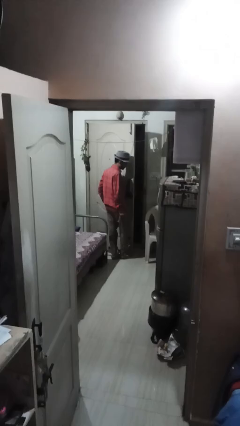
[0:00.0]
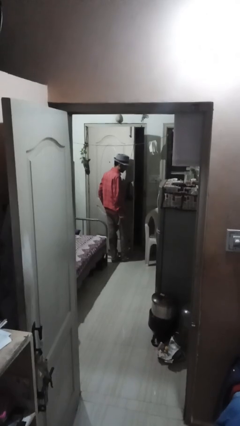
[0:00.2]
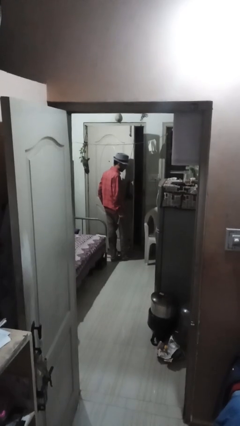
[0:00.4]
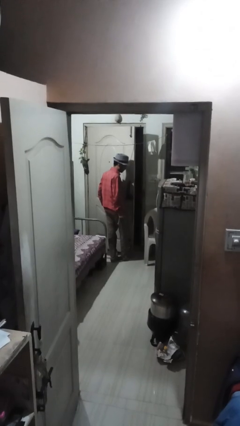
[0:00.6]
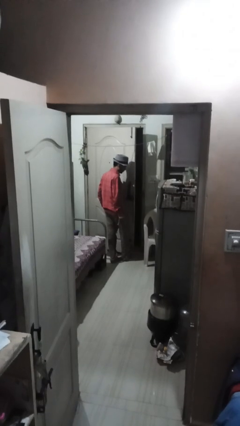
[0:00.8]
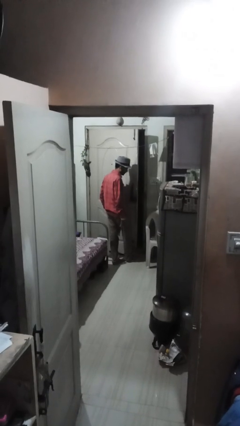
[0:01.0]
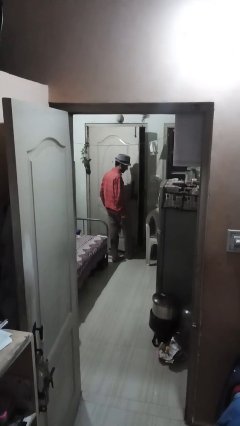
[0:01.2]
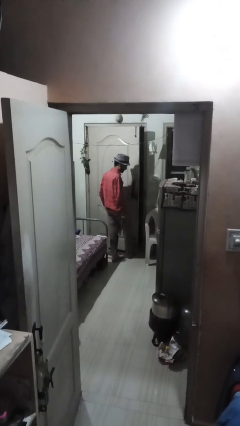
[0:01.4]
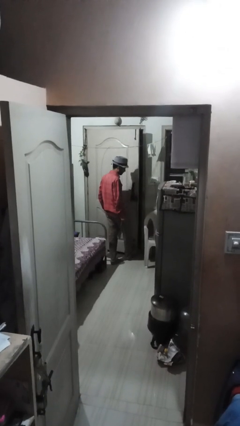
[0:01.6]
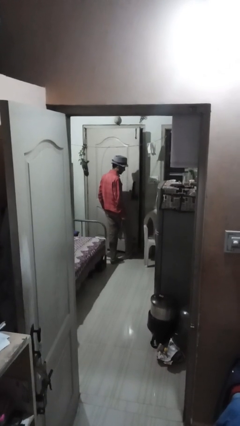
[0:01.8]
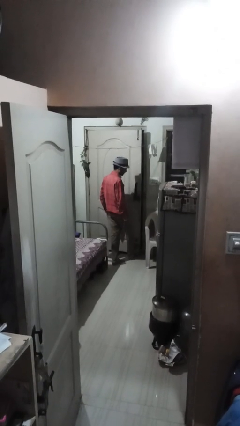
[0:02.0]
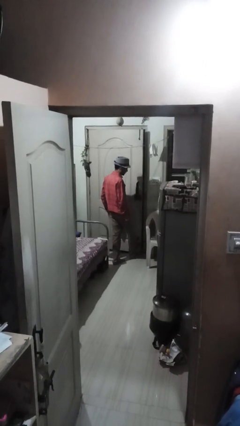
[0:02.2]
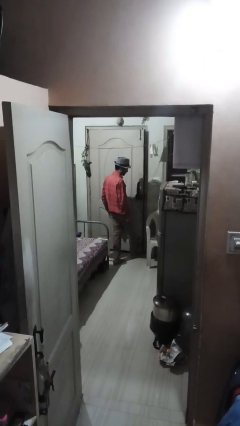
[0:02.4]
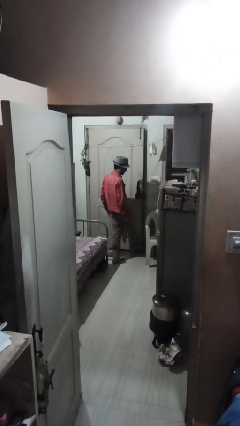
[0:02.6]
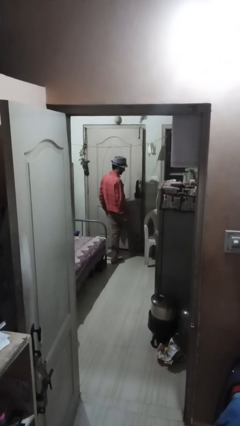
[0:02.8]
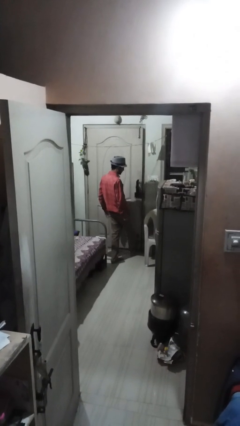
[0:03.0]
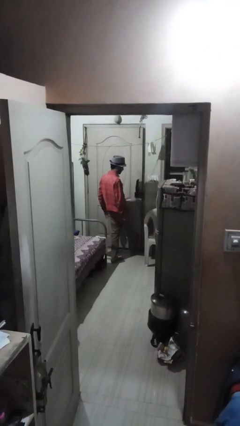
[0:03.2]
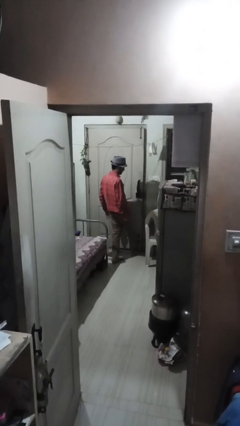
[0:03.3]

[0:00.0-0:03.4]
person opens facility door

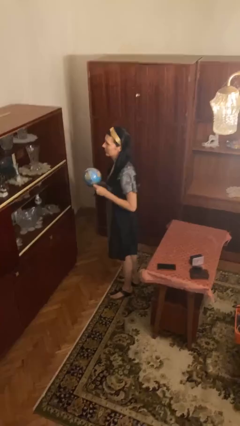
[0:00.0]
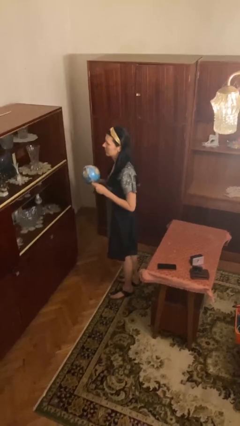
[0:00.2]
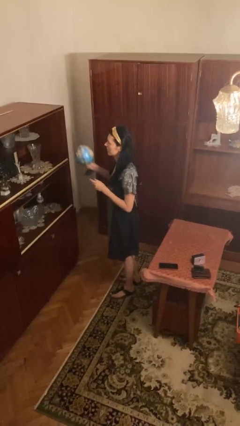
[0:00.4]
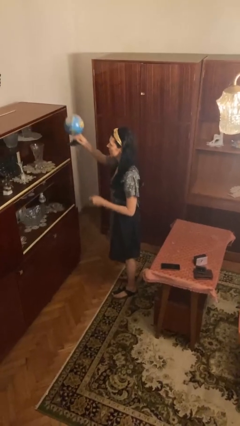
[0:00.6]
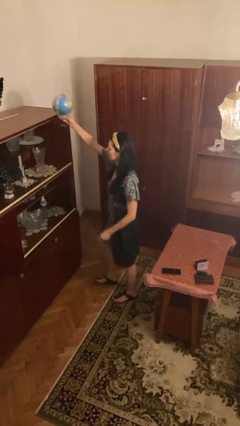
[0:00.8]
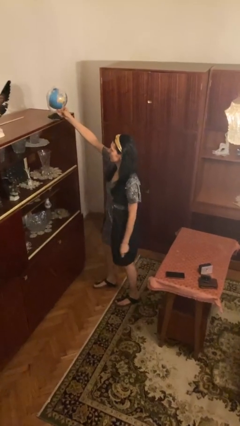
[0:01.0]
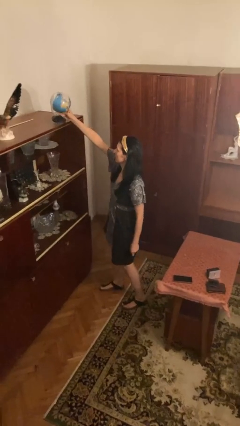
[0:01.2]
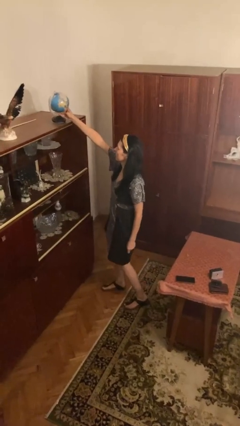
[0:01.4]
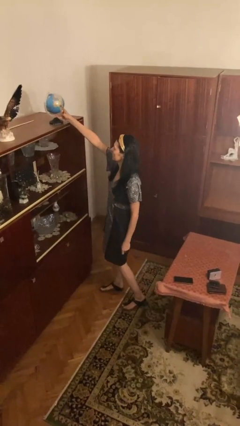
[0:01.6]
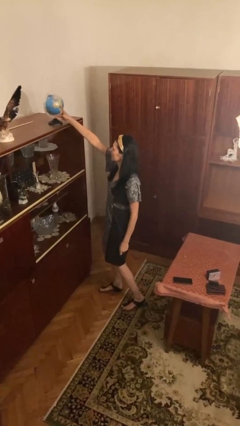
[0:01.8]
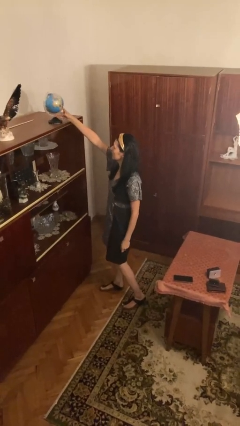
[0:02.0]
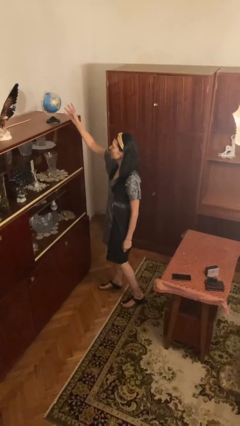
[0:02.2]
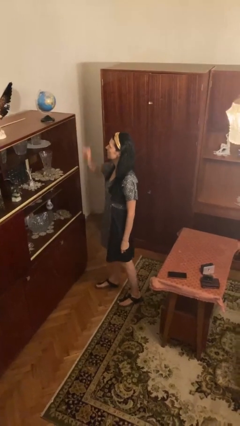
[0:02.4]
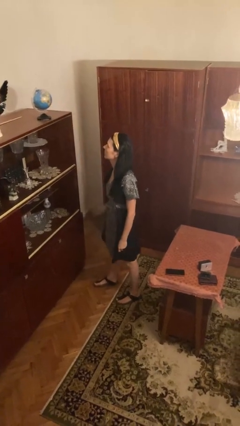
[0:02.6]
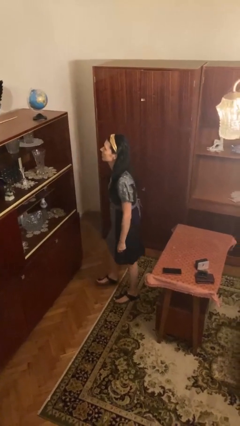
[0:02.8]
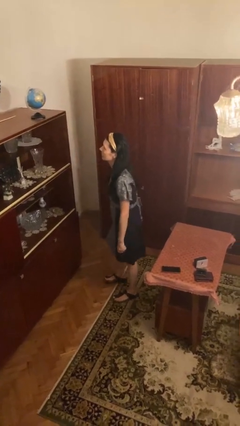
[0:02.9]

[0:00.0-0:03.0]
person puts down object on countertop

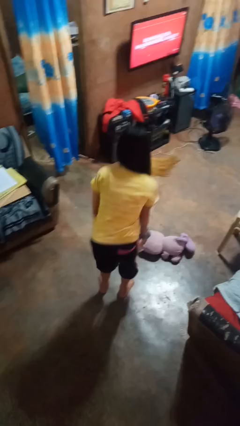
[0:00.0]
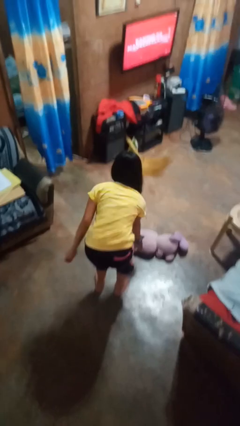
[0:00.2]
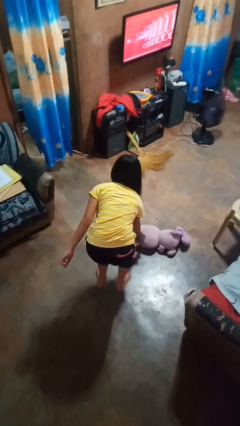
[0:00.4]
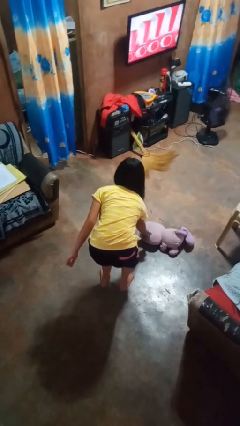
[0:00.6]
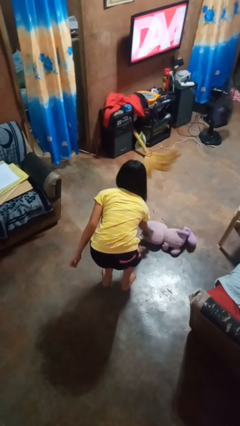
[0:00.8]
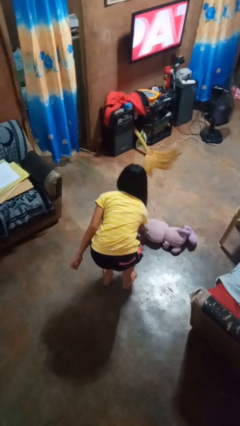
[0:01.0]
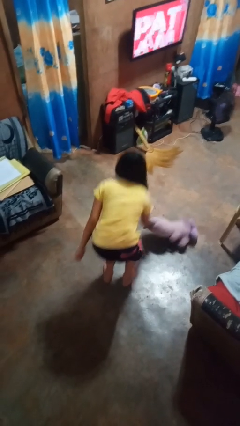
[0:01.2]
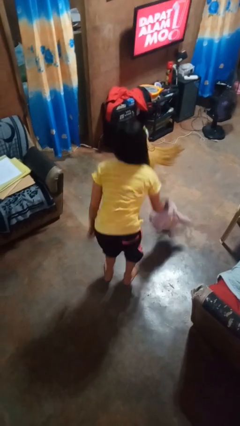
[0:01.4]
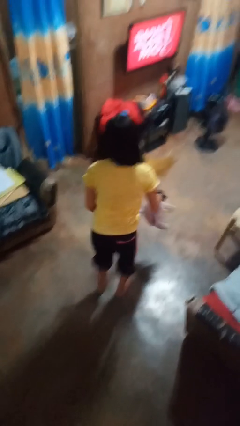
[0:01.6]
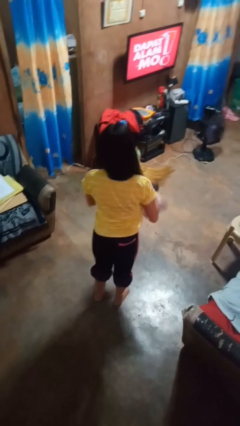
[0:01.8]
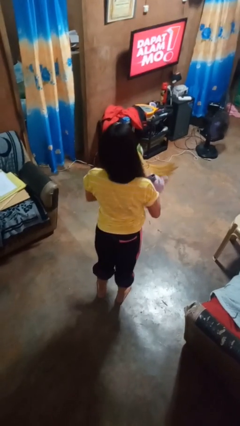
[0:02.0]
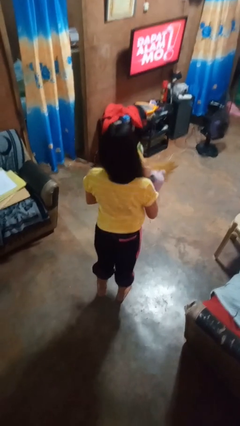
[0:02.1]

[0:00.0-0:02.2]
person picks up object from floor

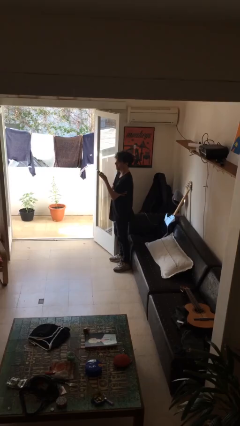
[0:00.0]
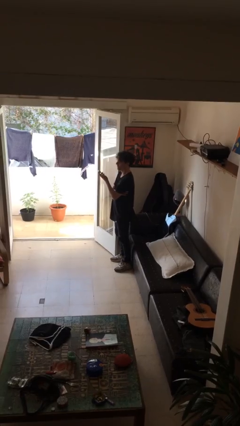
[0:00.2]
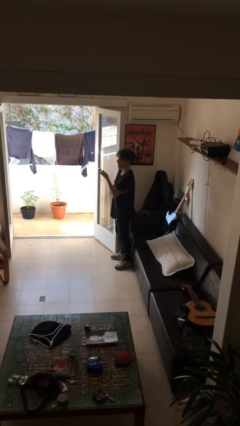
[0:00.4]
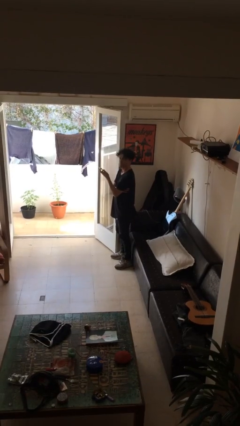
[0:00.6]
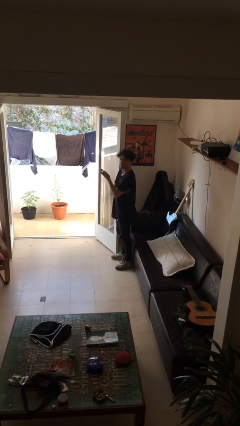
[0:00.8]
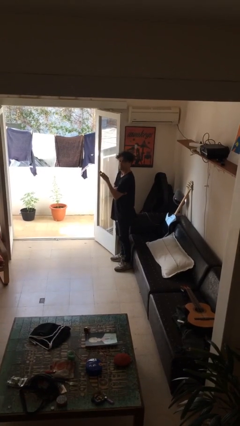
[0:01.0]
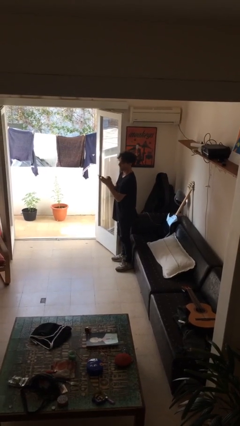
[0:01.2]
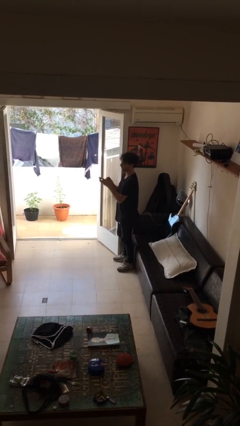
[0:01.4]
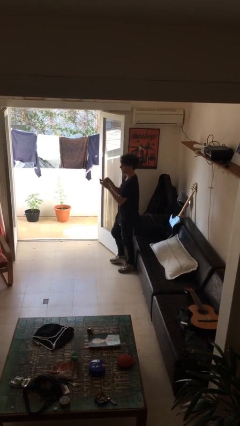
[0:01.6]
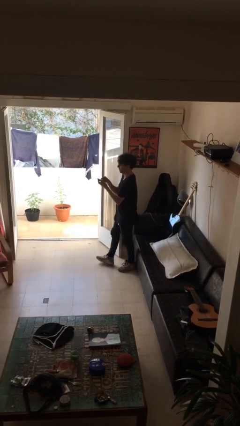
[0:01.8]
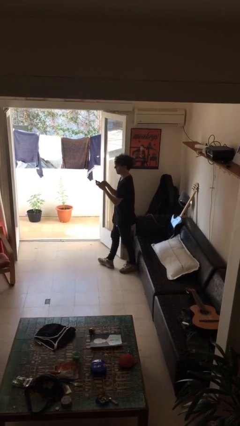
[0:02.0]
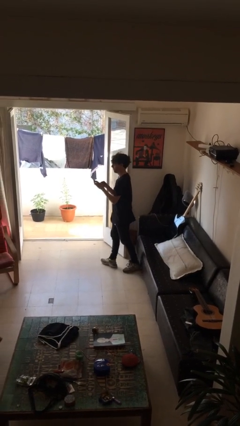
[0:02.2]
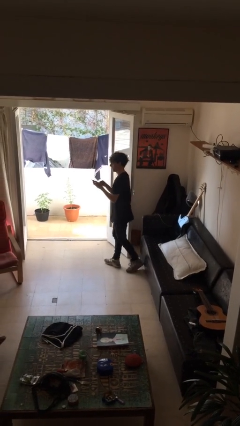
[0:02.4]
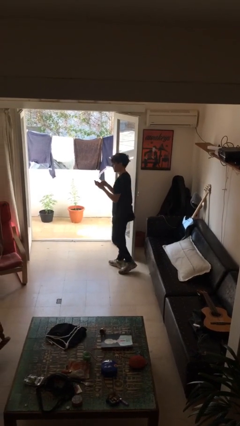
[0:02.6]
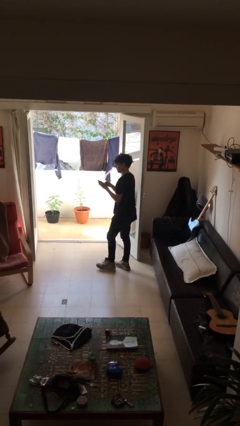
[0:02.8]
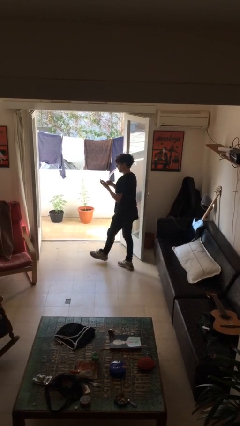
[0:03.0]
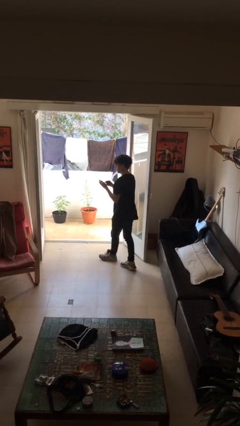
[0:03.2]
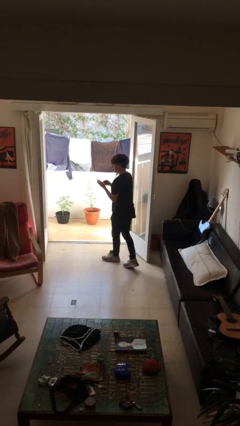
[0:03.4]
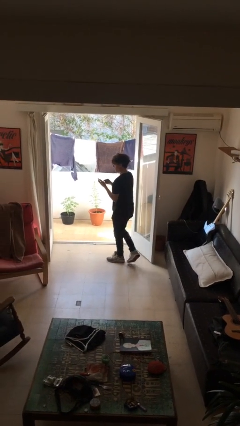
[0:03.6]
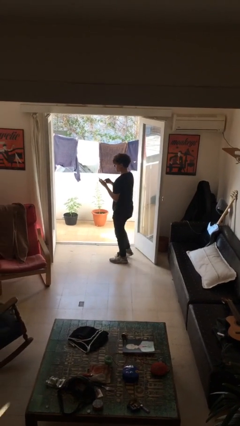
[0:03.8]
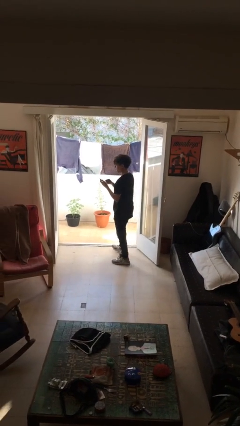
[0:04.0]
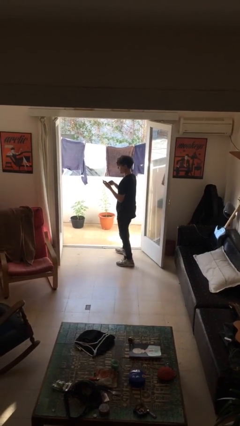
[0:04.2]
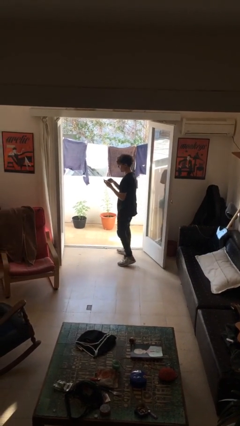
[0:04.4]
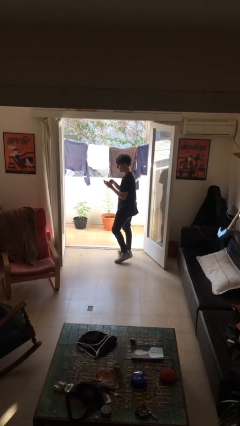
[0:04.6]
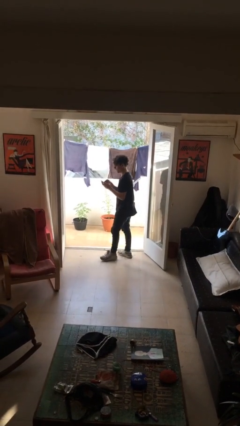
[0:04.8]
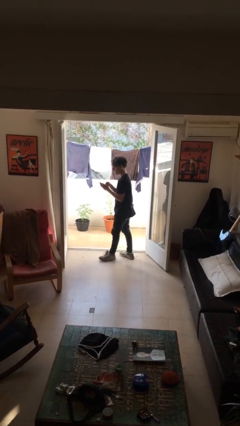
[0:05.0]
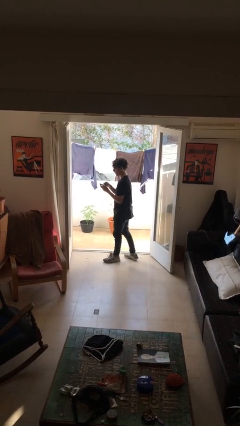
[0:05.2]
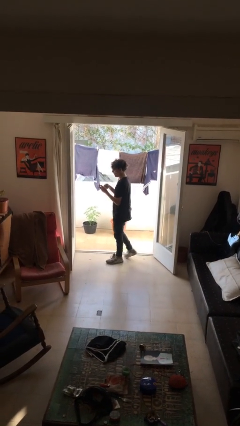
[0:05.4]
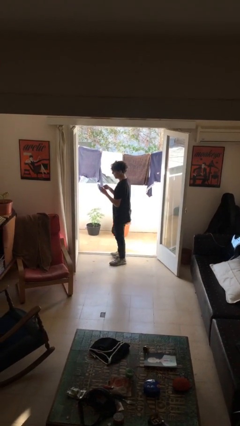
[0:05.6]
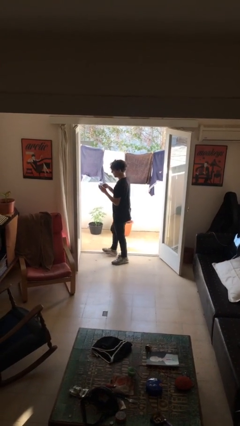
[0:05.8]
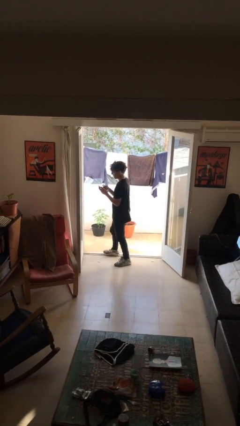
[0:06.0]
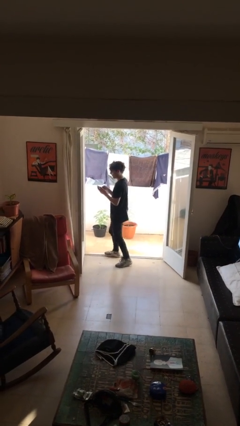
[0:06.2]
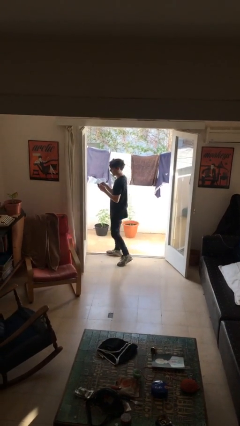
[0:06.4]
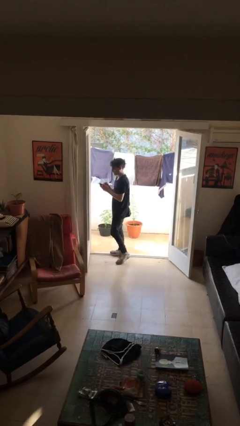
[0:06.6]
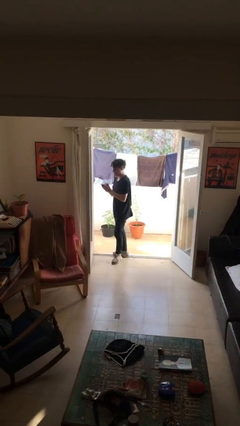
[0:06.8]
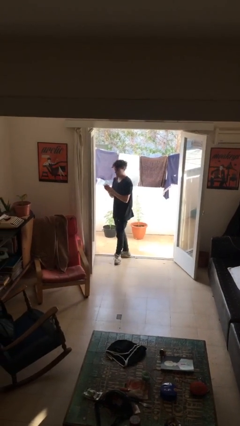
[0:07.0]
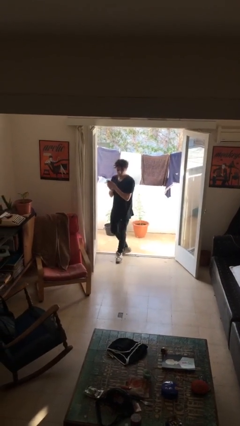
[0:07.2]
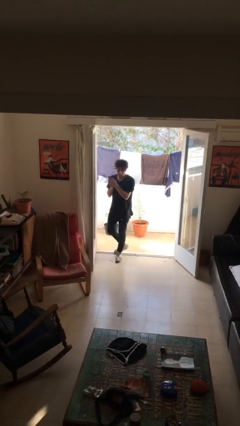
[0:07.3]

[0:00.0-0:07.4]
person texts on phone

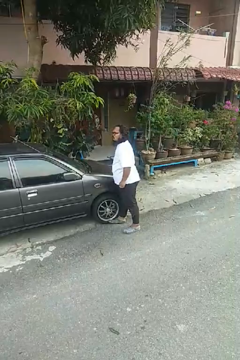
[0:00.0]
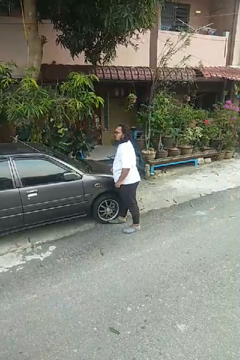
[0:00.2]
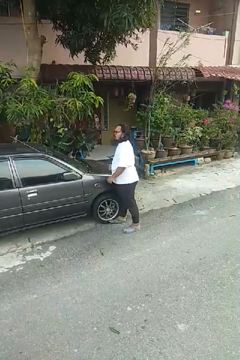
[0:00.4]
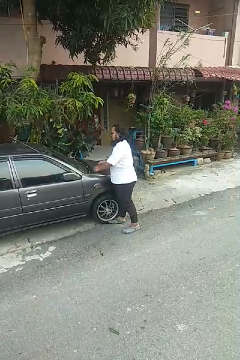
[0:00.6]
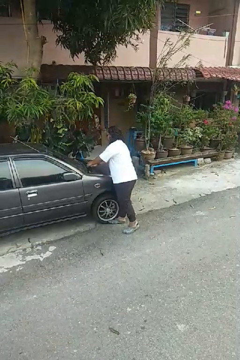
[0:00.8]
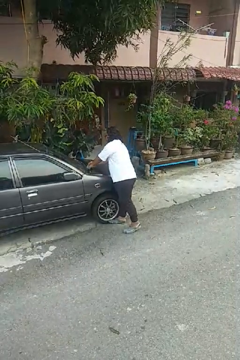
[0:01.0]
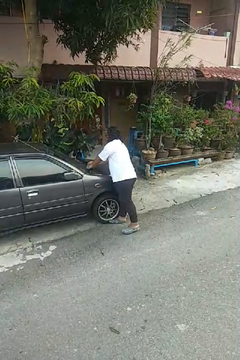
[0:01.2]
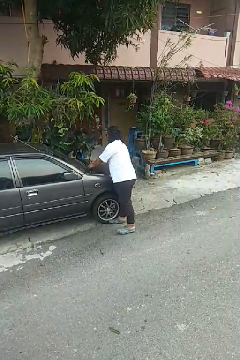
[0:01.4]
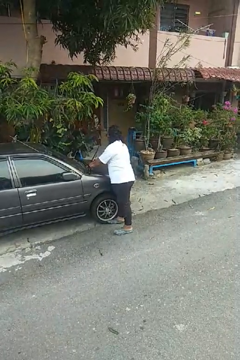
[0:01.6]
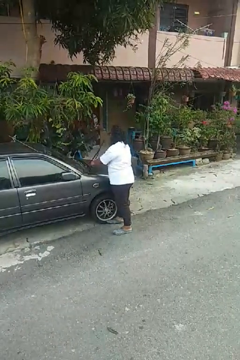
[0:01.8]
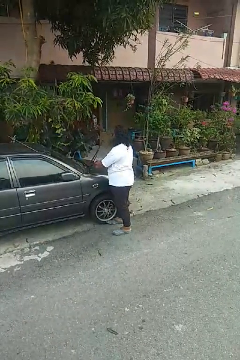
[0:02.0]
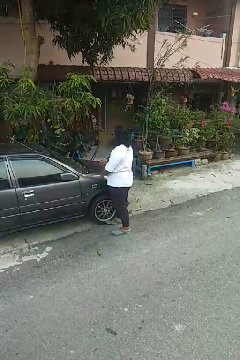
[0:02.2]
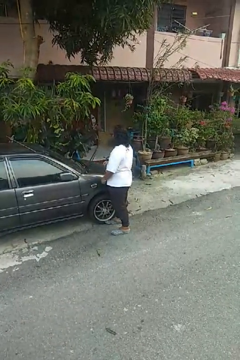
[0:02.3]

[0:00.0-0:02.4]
person flips up car wipers
